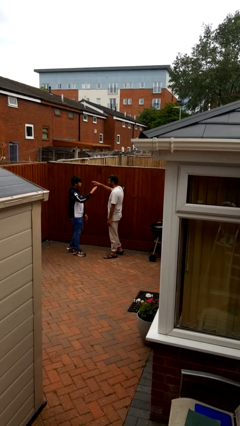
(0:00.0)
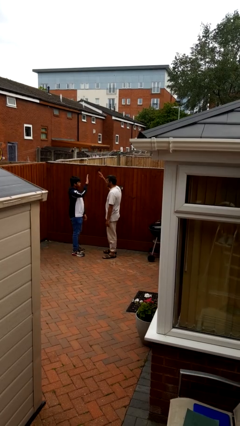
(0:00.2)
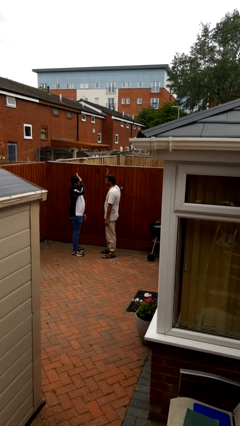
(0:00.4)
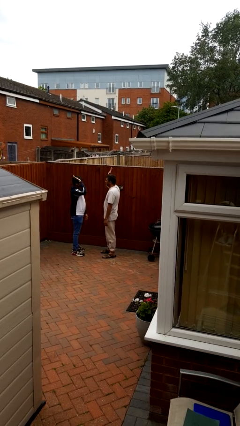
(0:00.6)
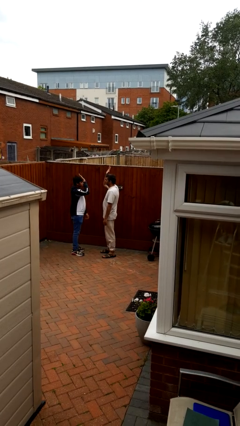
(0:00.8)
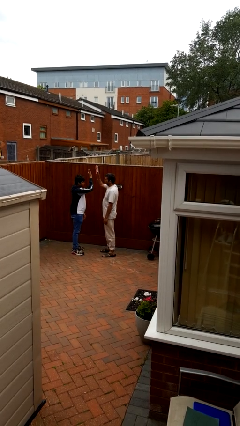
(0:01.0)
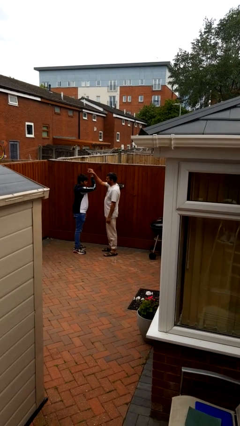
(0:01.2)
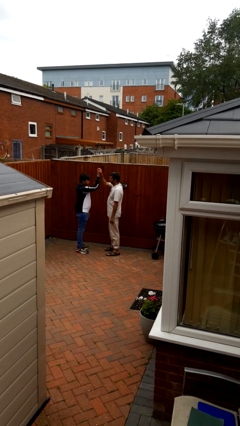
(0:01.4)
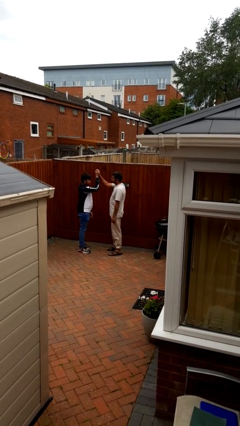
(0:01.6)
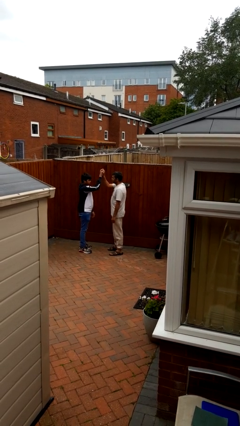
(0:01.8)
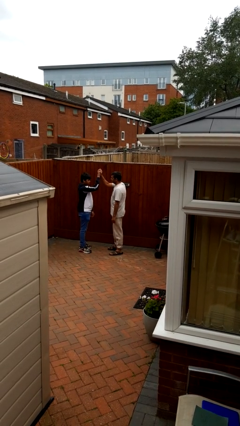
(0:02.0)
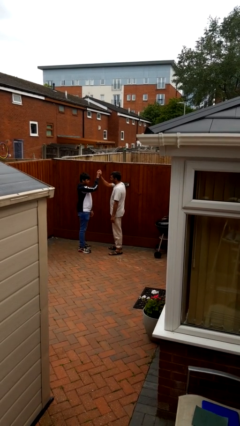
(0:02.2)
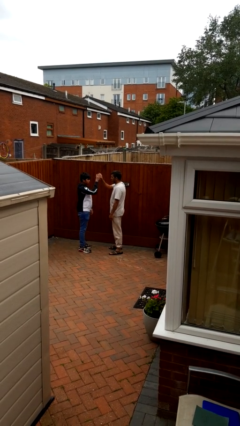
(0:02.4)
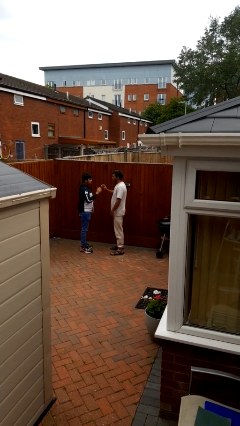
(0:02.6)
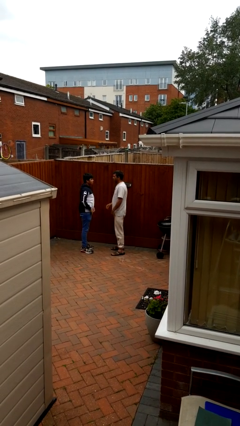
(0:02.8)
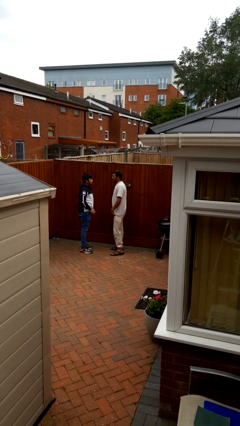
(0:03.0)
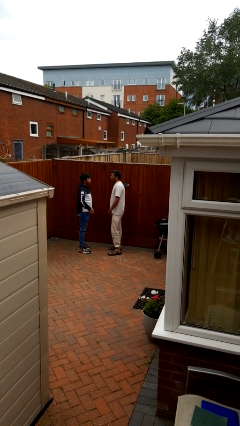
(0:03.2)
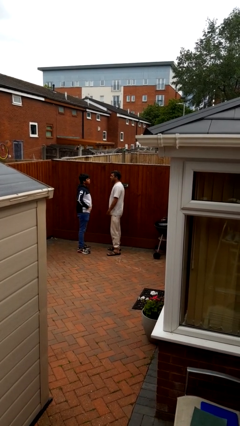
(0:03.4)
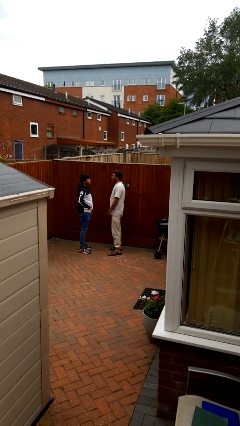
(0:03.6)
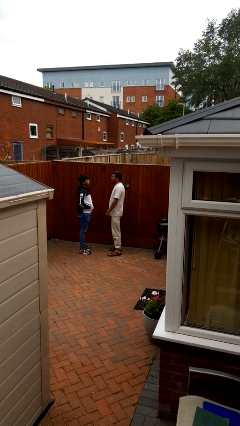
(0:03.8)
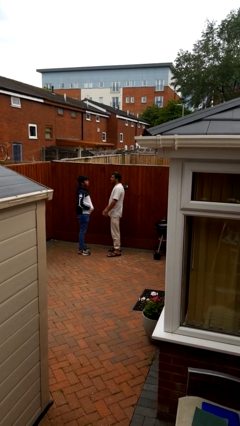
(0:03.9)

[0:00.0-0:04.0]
person highfives hand

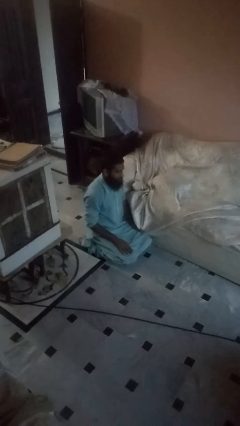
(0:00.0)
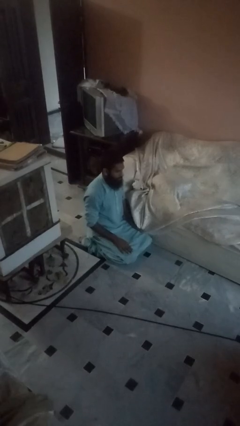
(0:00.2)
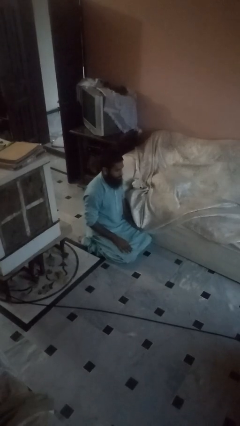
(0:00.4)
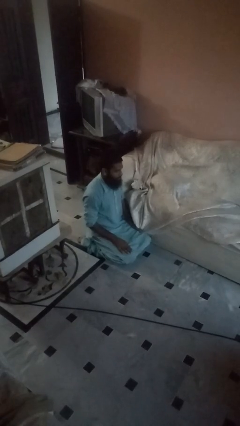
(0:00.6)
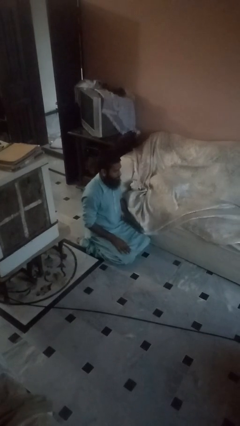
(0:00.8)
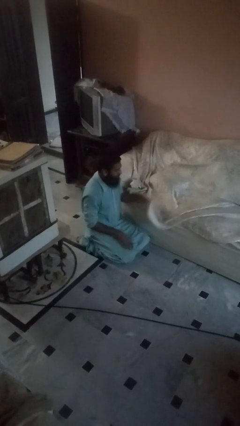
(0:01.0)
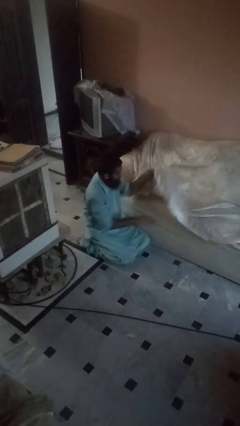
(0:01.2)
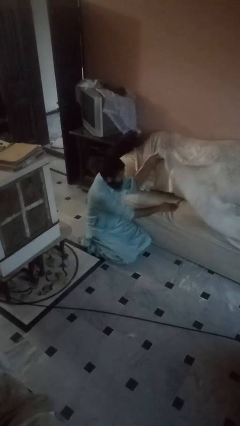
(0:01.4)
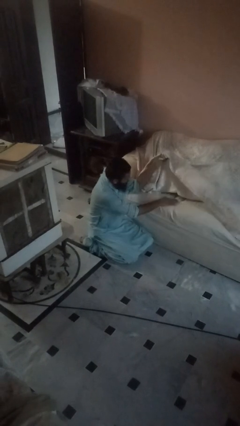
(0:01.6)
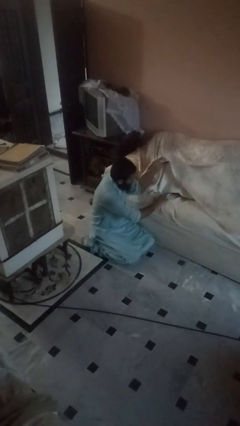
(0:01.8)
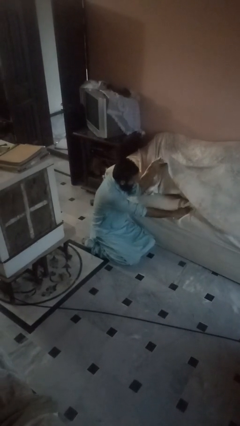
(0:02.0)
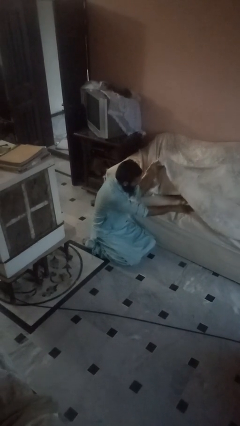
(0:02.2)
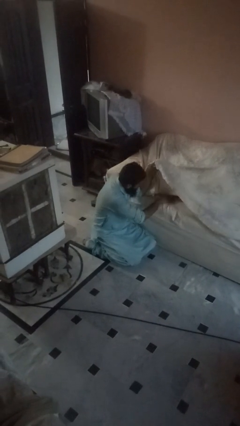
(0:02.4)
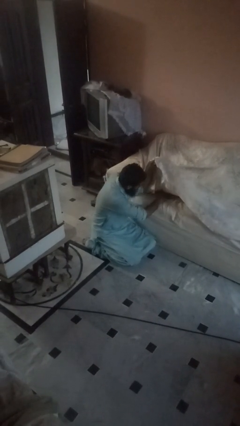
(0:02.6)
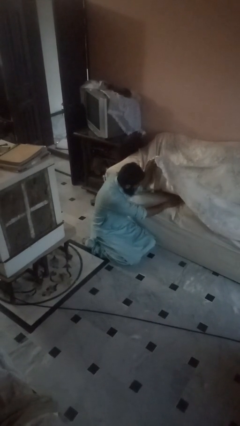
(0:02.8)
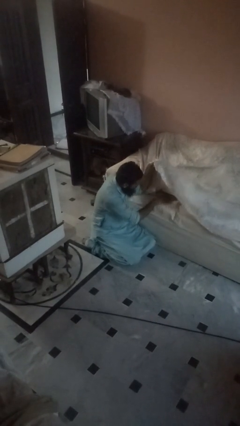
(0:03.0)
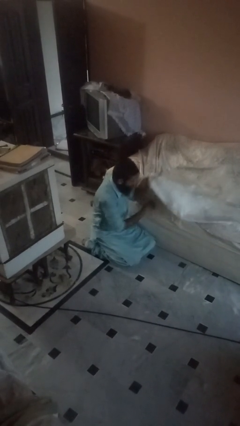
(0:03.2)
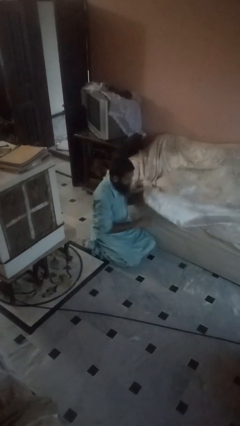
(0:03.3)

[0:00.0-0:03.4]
person searches in couch

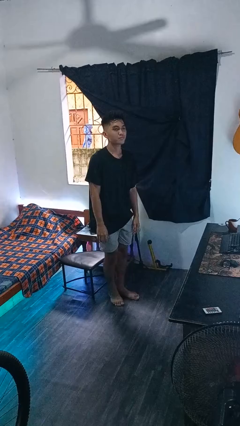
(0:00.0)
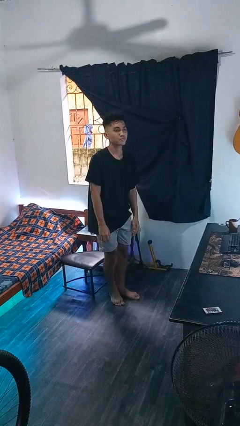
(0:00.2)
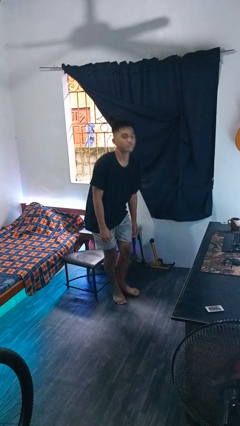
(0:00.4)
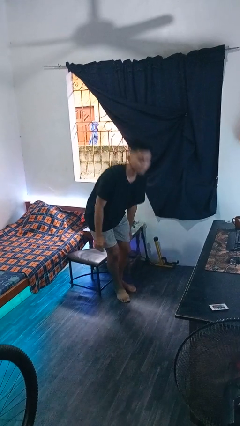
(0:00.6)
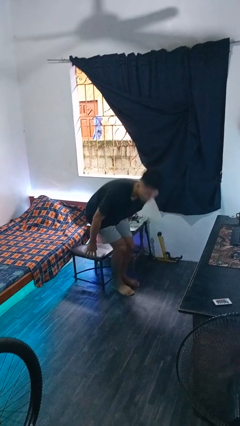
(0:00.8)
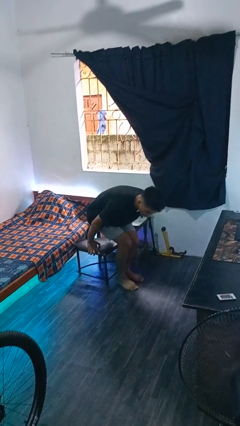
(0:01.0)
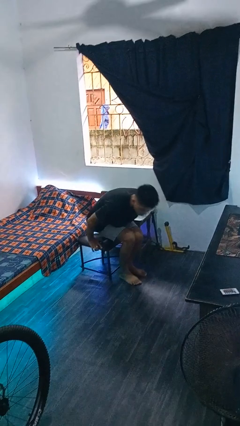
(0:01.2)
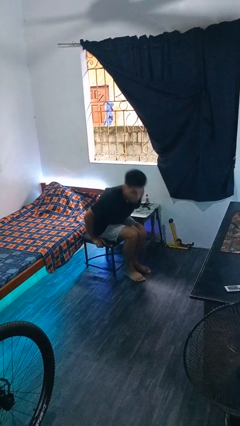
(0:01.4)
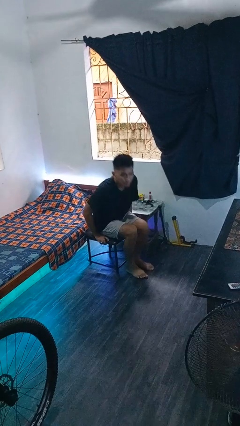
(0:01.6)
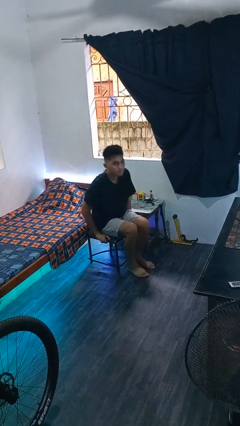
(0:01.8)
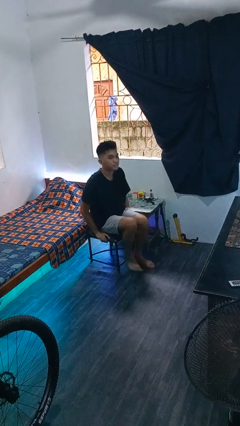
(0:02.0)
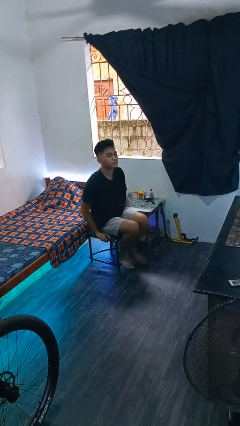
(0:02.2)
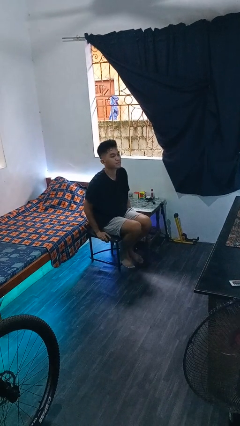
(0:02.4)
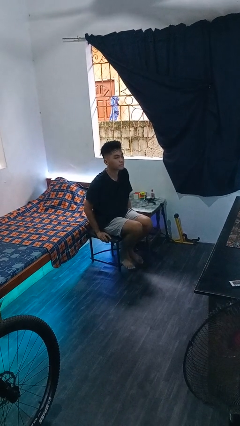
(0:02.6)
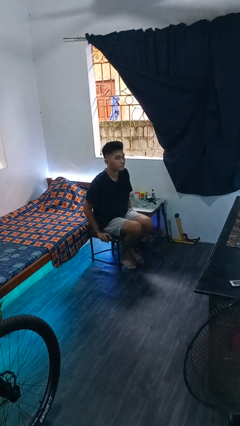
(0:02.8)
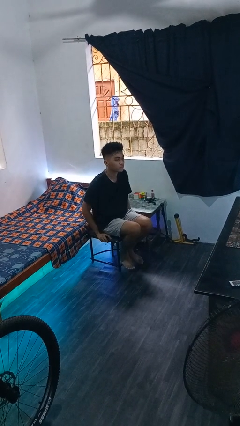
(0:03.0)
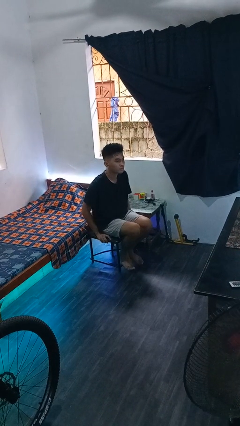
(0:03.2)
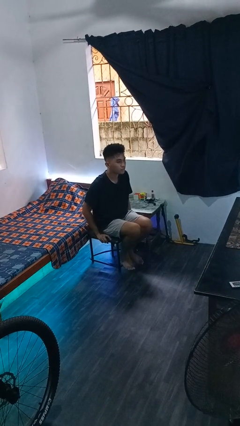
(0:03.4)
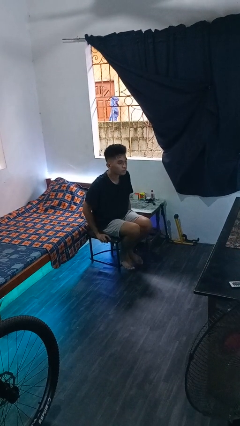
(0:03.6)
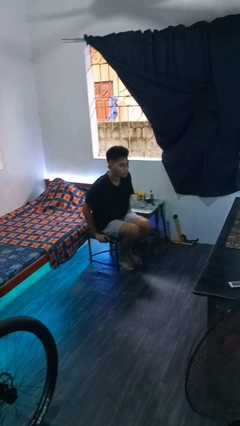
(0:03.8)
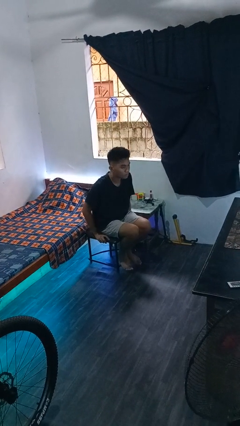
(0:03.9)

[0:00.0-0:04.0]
person sits down

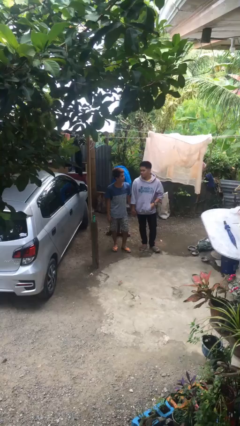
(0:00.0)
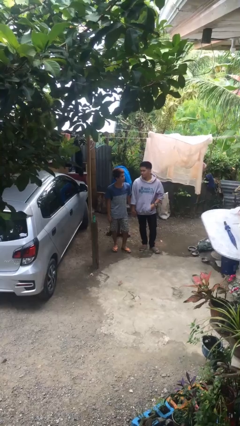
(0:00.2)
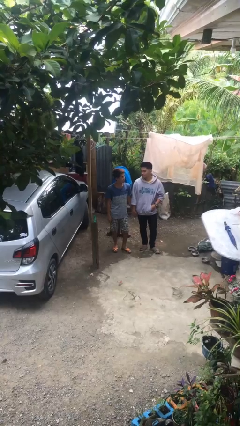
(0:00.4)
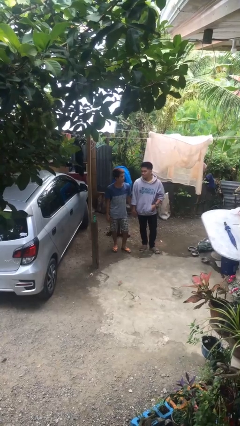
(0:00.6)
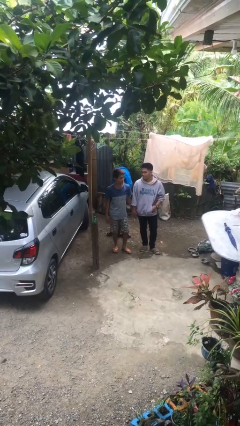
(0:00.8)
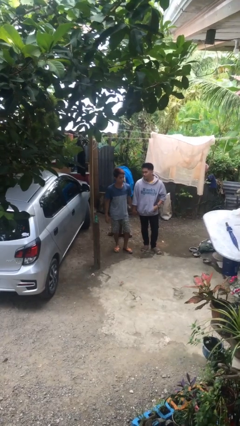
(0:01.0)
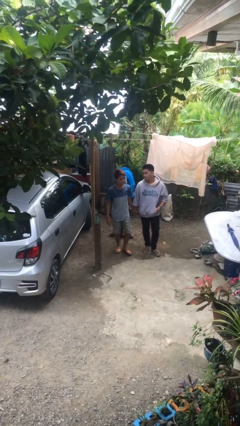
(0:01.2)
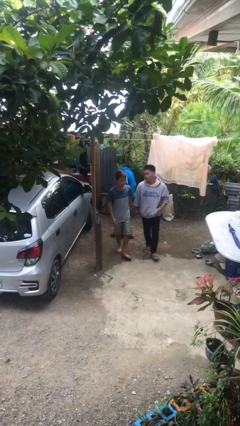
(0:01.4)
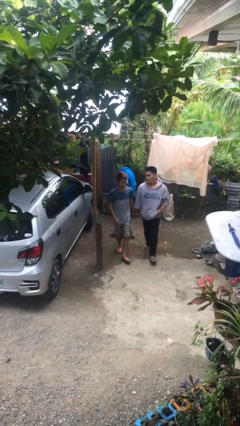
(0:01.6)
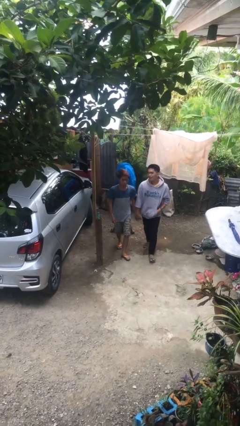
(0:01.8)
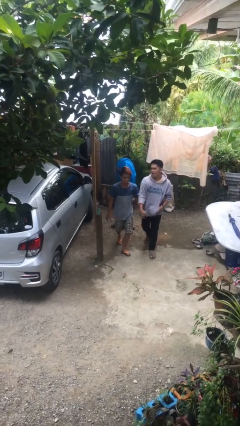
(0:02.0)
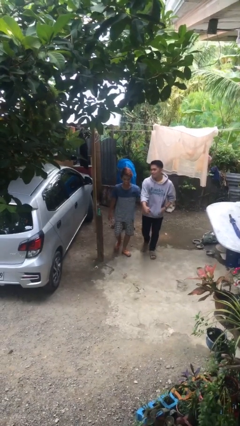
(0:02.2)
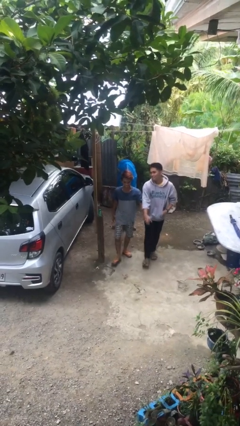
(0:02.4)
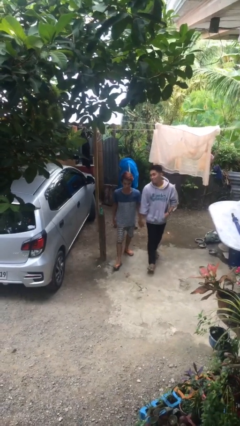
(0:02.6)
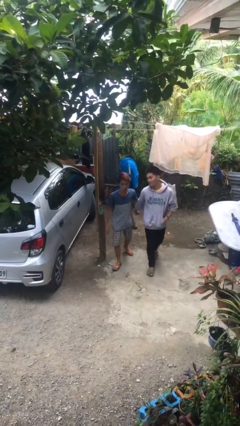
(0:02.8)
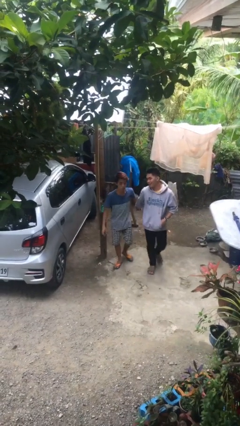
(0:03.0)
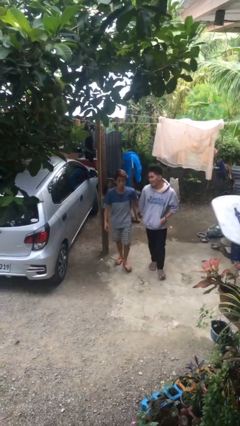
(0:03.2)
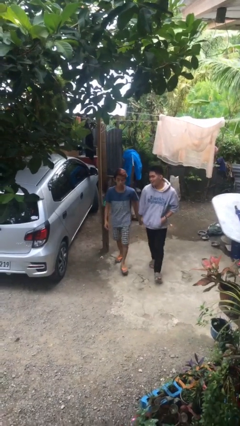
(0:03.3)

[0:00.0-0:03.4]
person holds hand

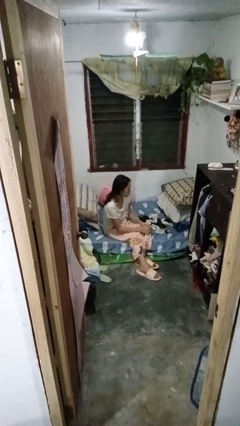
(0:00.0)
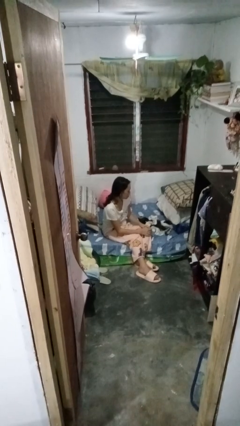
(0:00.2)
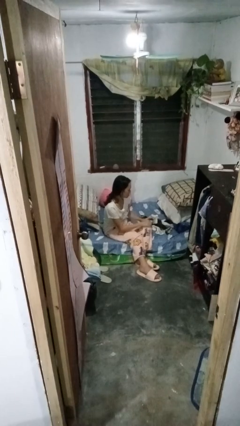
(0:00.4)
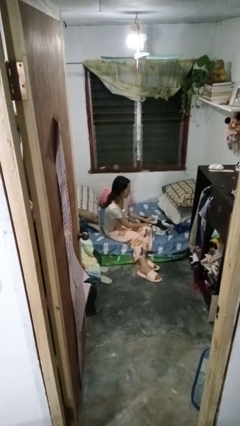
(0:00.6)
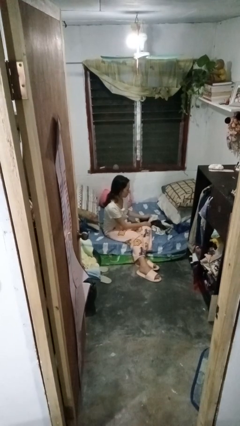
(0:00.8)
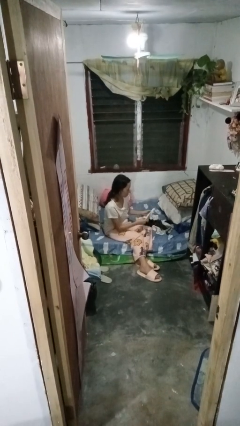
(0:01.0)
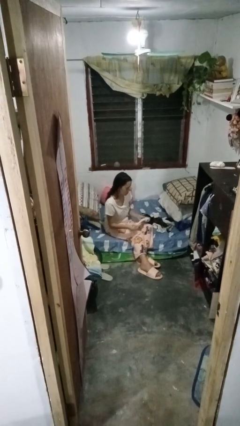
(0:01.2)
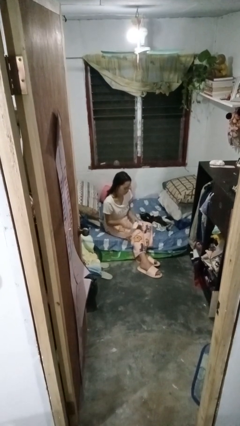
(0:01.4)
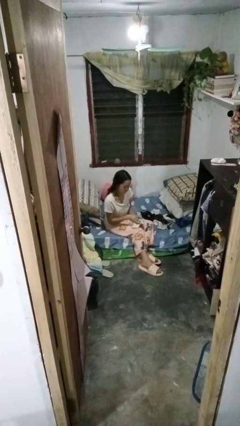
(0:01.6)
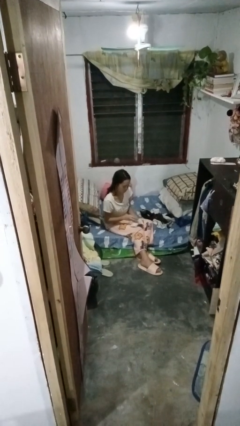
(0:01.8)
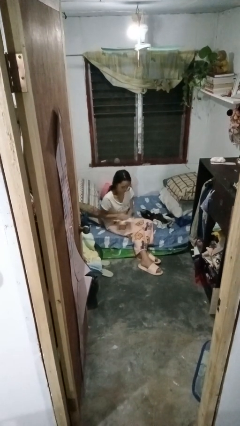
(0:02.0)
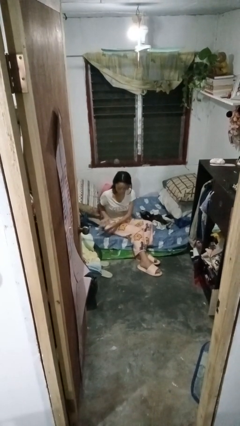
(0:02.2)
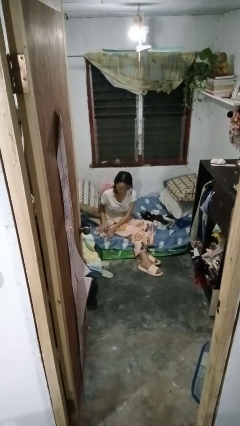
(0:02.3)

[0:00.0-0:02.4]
person folds socks

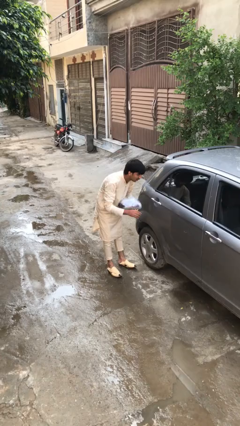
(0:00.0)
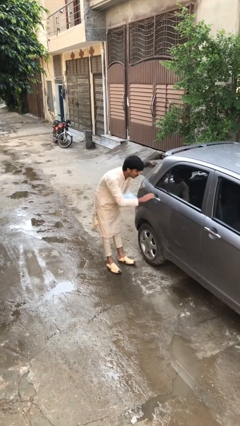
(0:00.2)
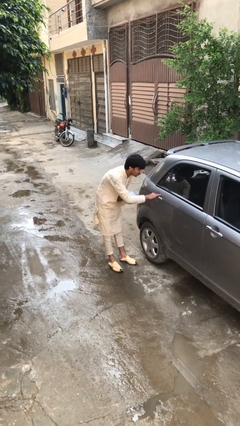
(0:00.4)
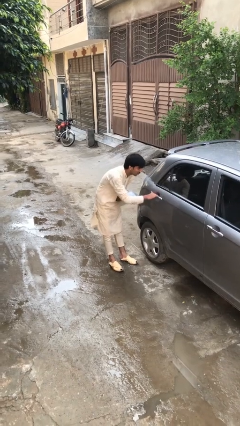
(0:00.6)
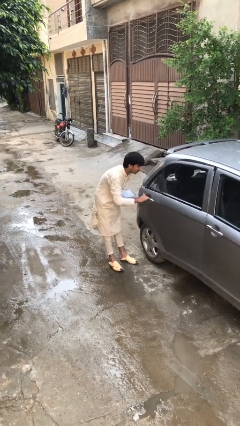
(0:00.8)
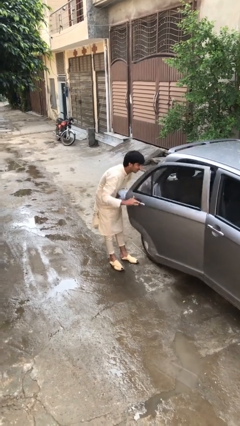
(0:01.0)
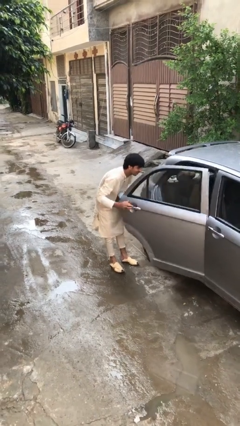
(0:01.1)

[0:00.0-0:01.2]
person opens car door
